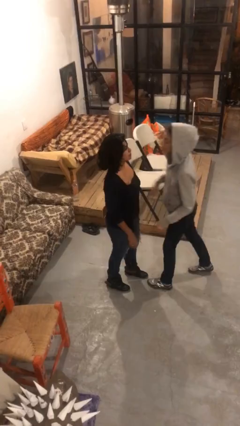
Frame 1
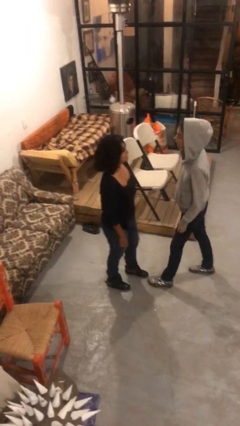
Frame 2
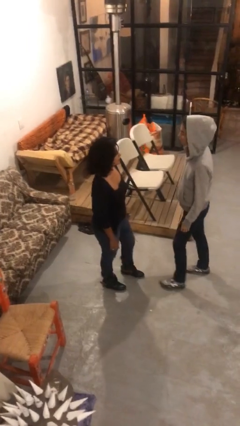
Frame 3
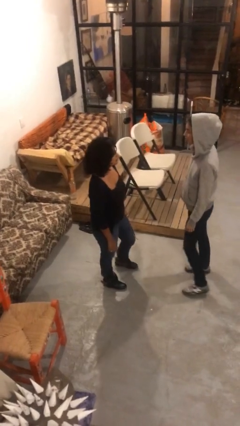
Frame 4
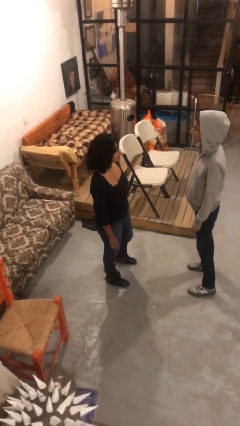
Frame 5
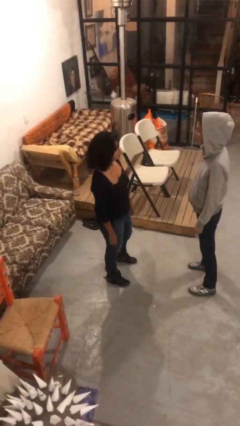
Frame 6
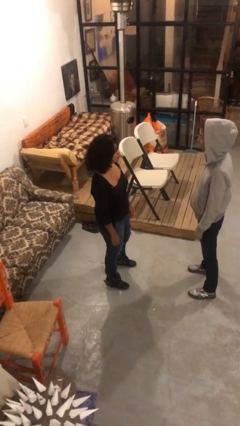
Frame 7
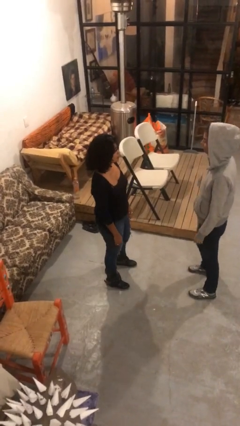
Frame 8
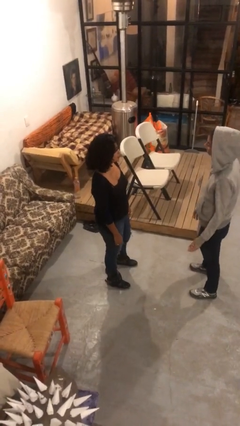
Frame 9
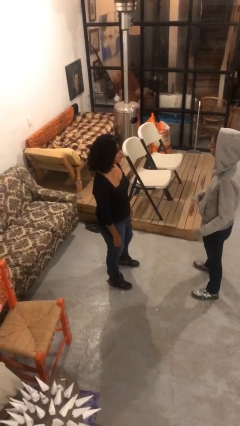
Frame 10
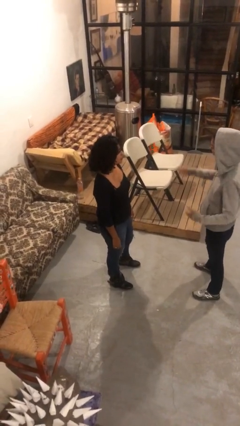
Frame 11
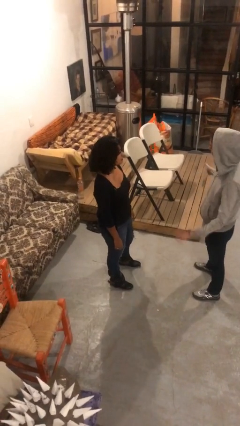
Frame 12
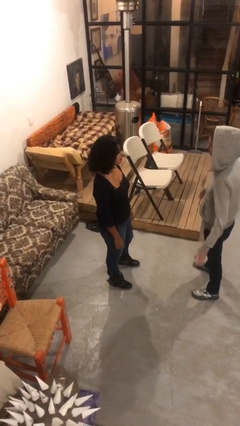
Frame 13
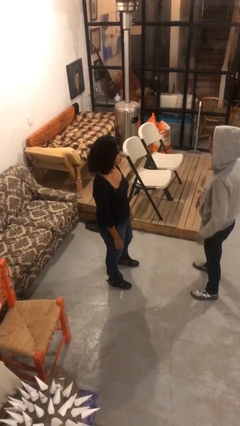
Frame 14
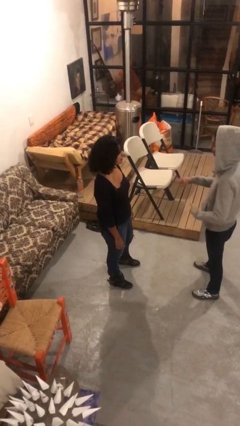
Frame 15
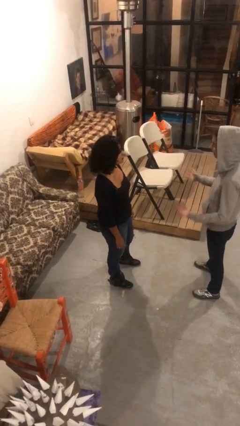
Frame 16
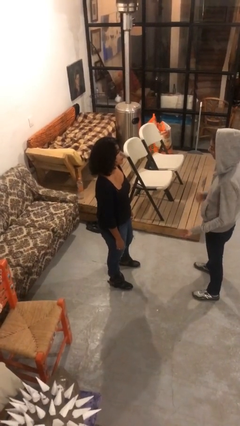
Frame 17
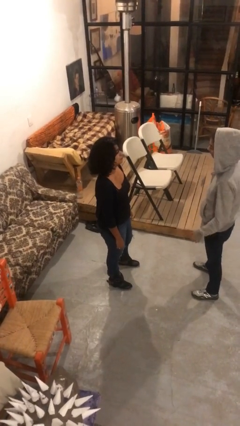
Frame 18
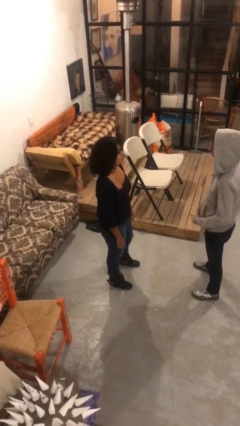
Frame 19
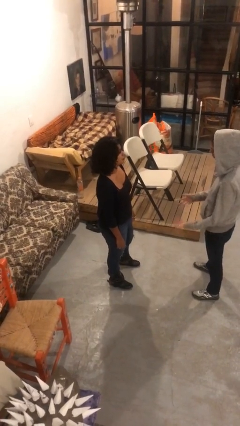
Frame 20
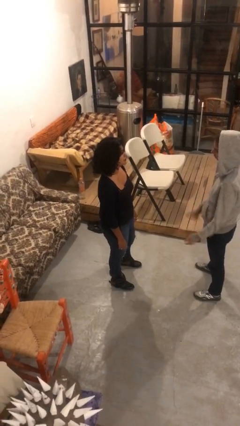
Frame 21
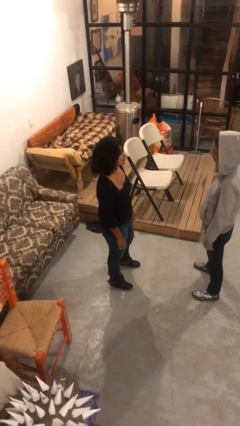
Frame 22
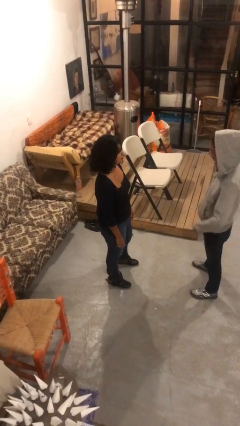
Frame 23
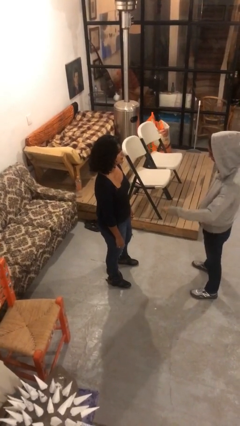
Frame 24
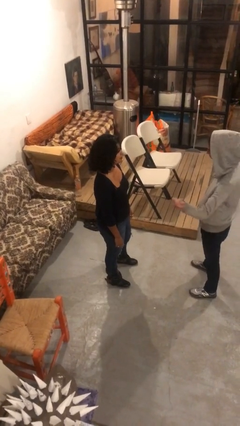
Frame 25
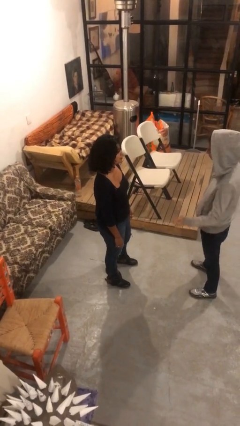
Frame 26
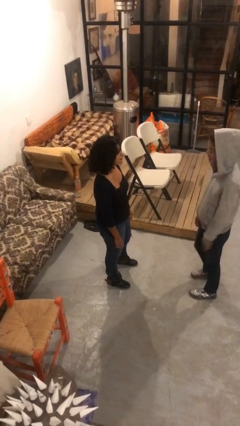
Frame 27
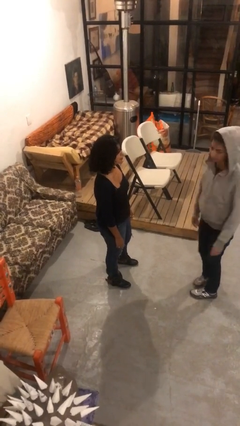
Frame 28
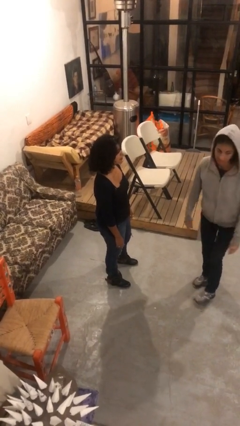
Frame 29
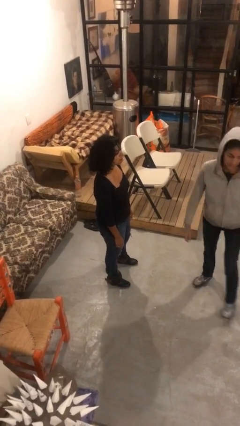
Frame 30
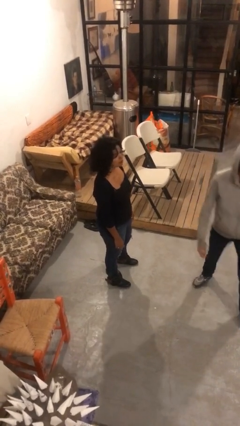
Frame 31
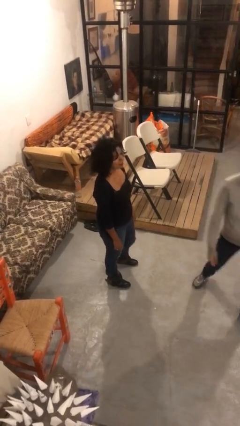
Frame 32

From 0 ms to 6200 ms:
person talks to person

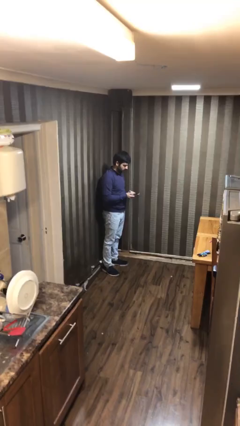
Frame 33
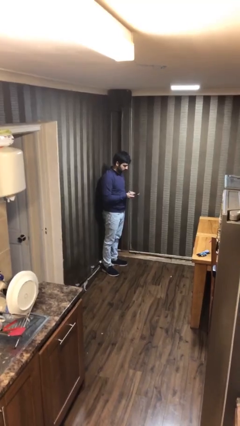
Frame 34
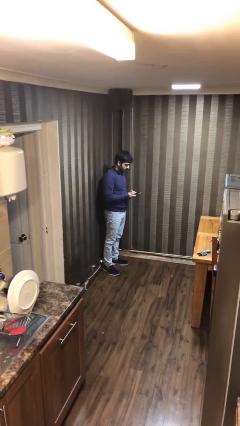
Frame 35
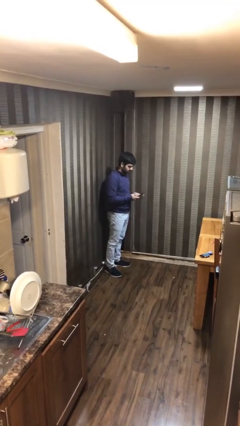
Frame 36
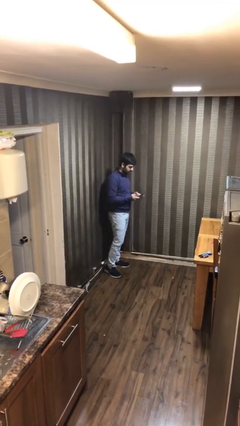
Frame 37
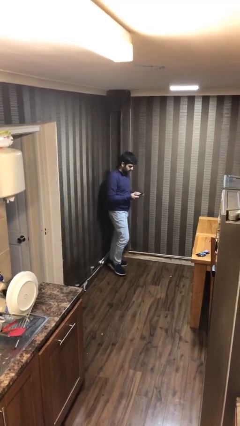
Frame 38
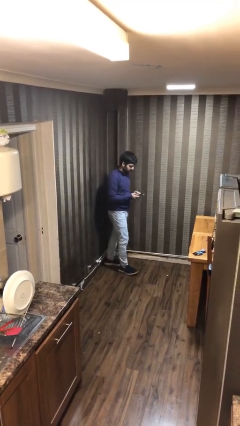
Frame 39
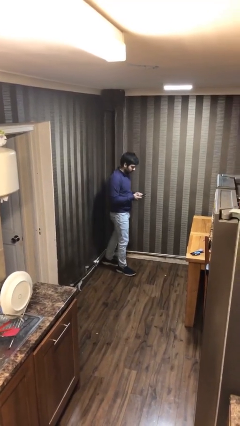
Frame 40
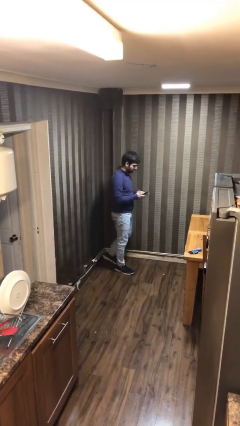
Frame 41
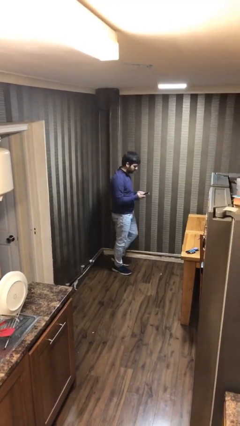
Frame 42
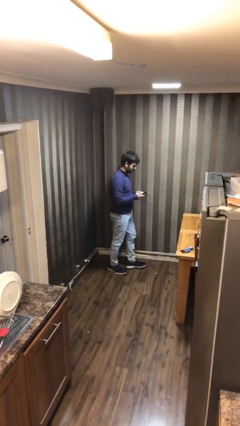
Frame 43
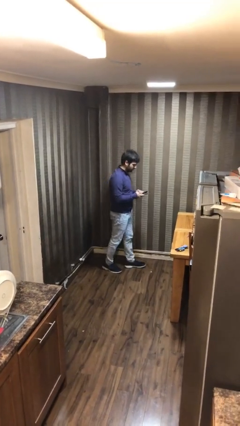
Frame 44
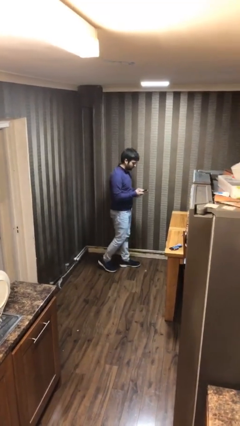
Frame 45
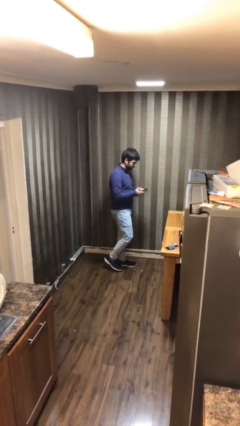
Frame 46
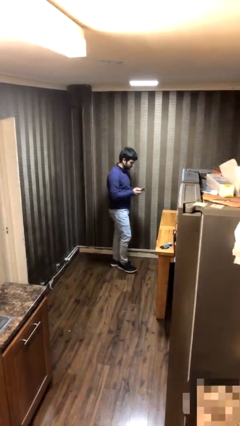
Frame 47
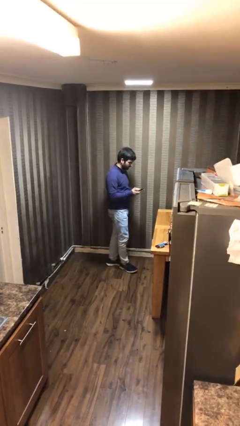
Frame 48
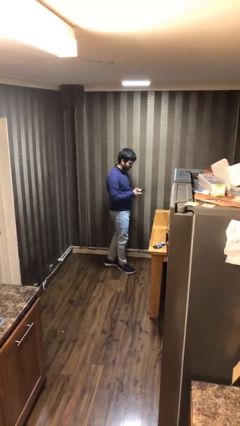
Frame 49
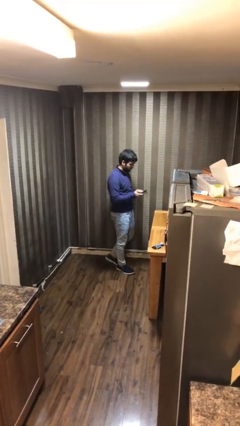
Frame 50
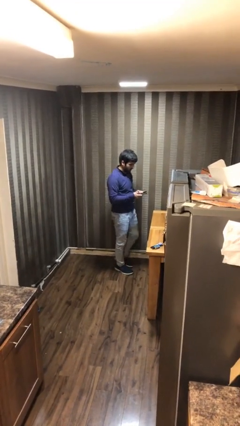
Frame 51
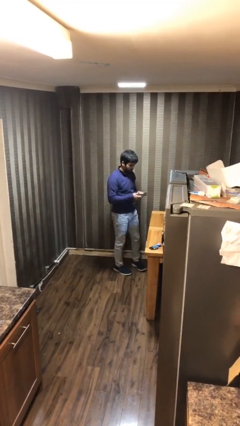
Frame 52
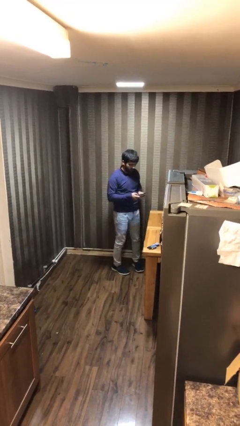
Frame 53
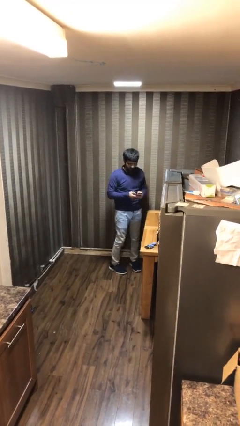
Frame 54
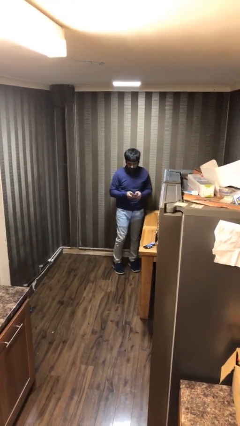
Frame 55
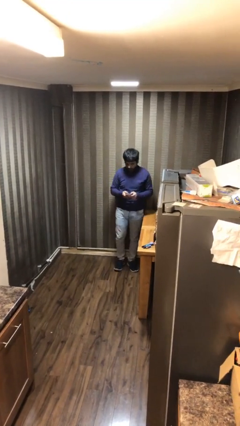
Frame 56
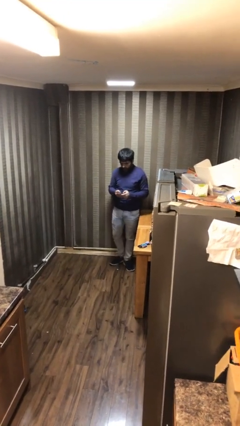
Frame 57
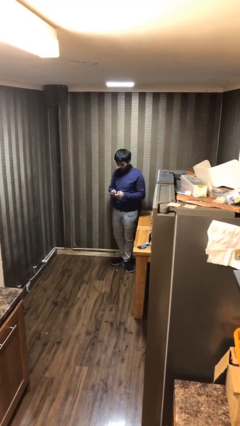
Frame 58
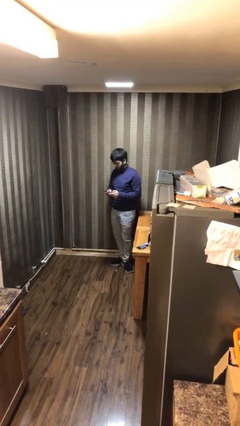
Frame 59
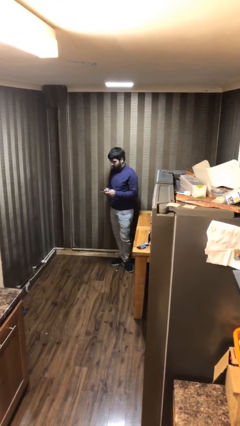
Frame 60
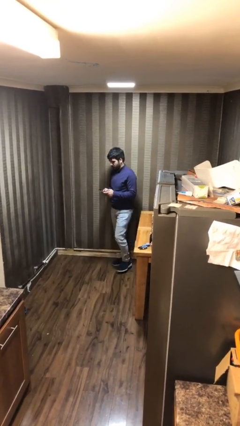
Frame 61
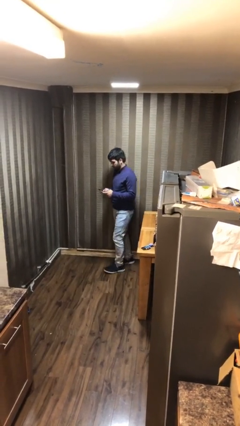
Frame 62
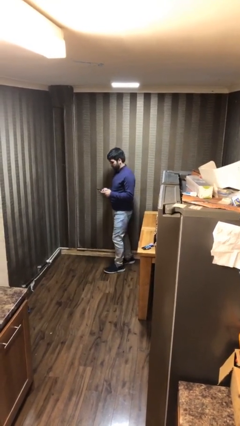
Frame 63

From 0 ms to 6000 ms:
person texts on phone

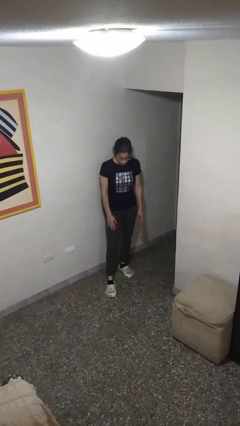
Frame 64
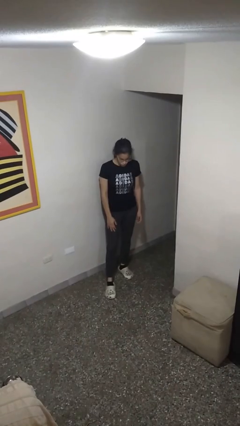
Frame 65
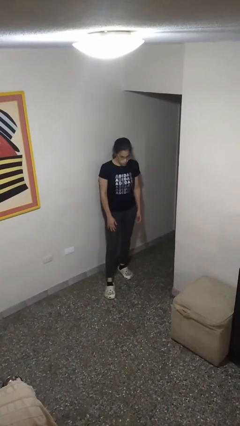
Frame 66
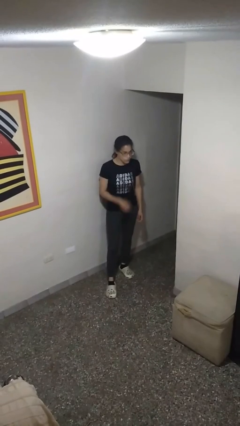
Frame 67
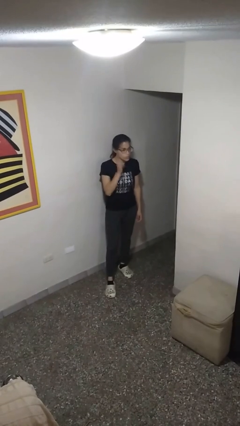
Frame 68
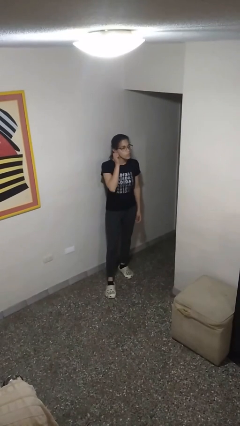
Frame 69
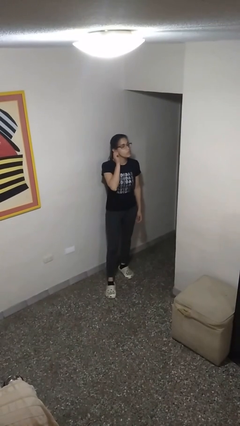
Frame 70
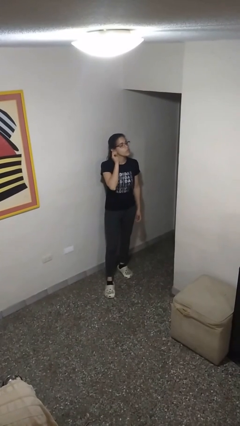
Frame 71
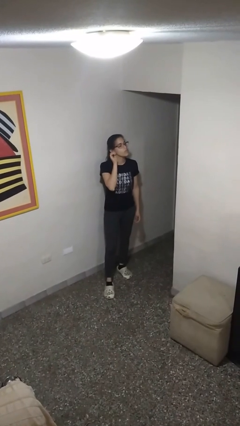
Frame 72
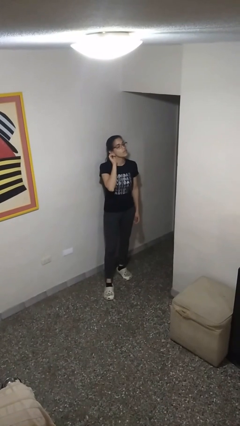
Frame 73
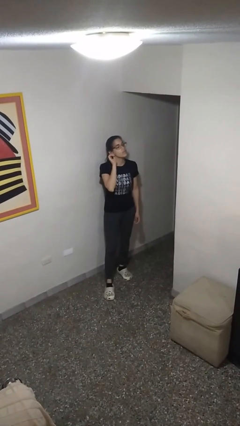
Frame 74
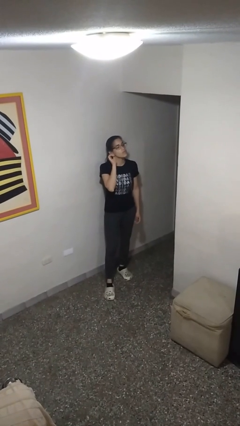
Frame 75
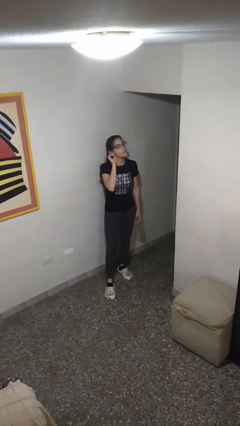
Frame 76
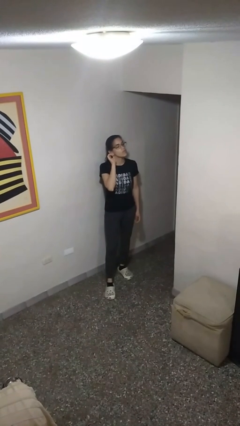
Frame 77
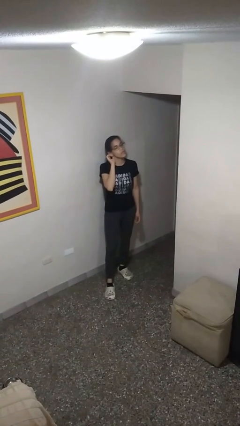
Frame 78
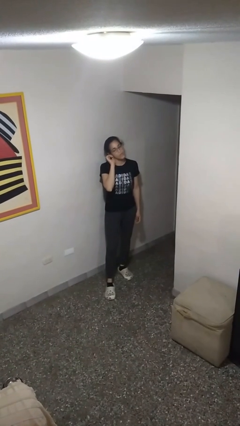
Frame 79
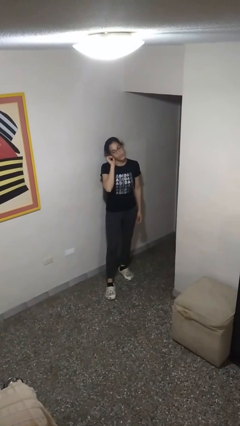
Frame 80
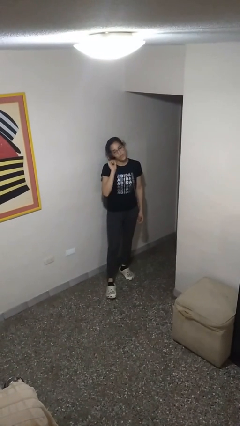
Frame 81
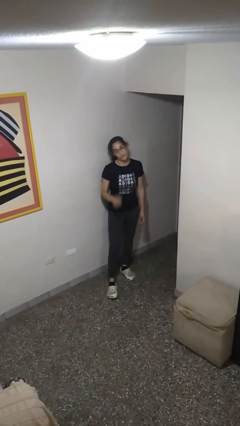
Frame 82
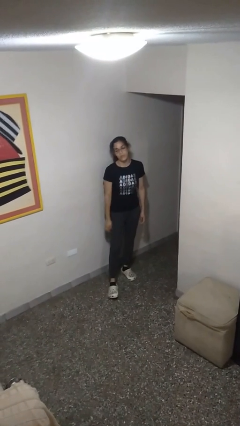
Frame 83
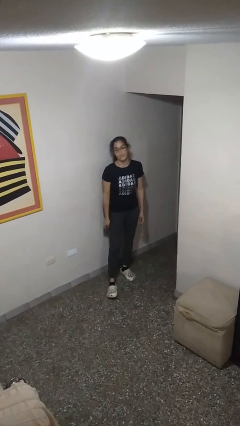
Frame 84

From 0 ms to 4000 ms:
person touches earlobe

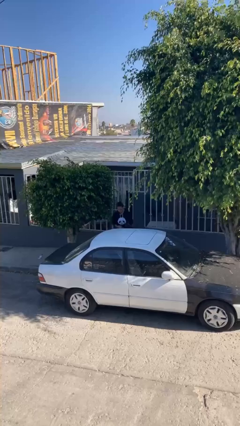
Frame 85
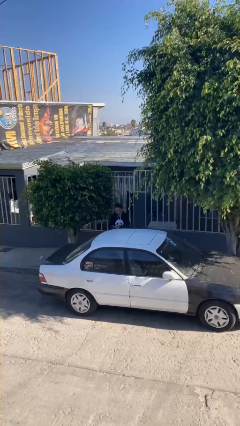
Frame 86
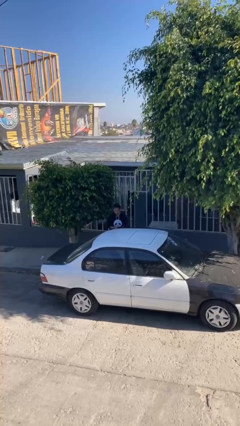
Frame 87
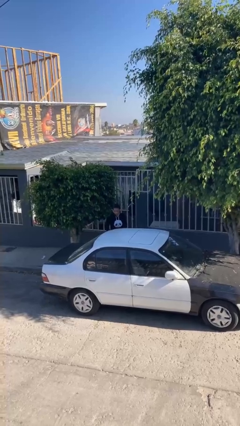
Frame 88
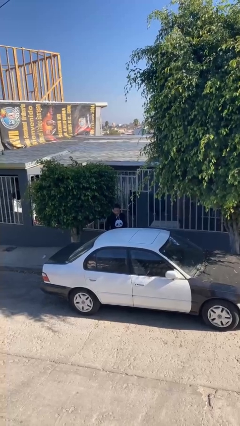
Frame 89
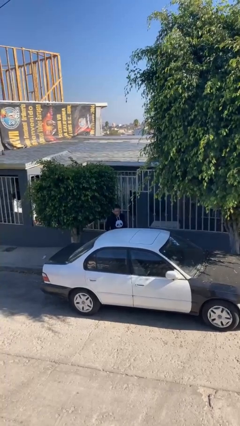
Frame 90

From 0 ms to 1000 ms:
person closes car door

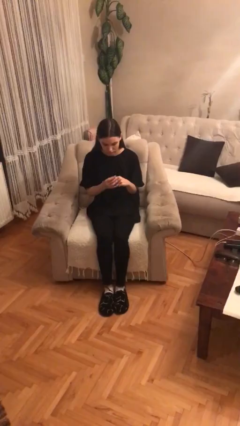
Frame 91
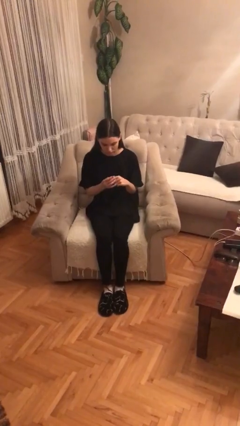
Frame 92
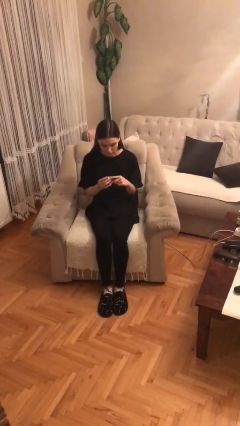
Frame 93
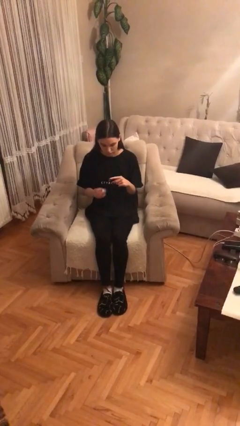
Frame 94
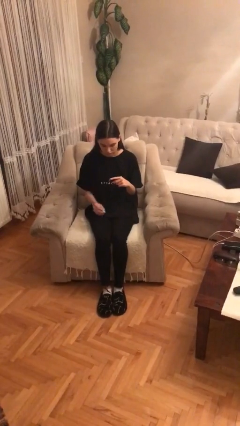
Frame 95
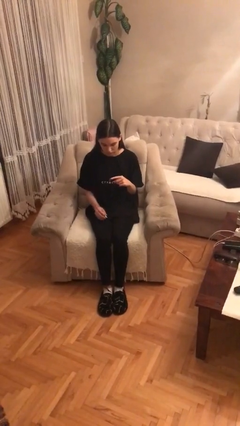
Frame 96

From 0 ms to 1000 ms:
person takes off ring
